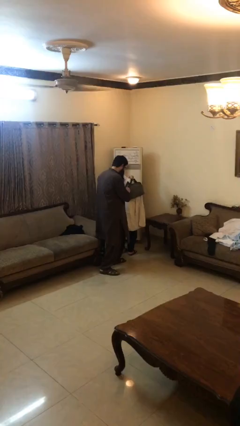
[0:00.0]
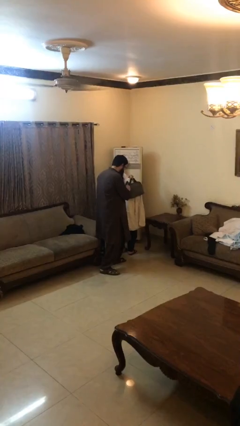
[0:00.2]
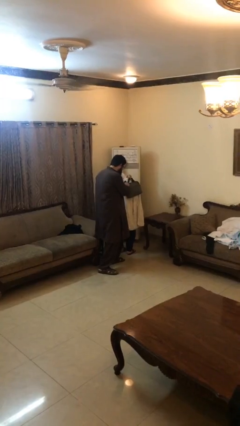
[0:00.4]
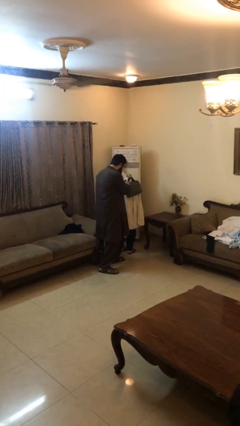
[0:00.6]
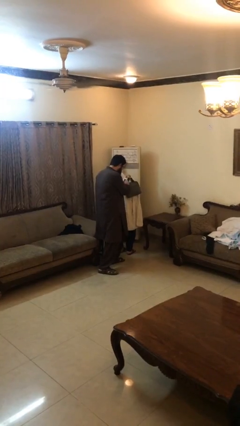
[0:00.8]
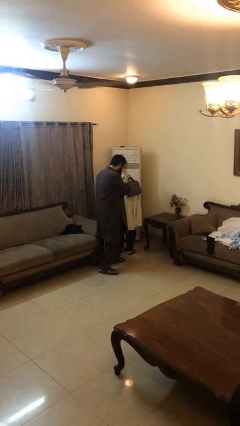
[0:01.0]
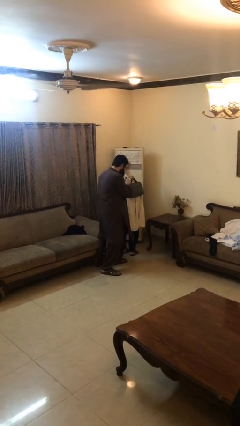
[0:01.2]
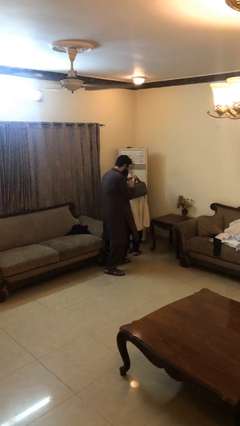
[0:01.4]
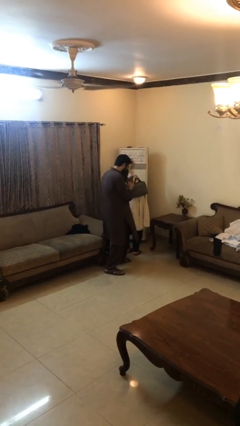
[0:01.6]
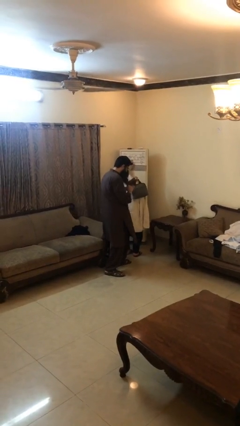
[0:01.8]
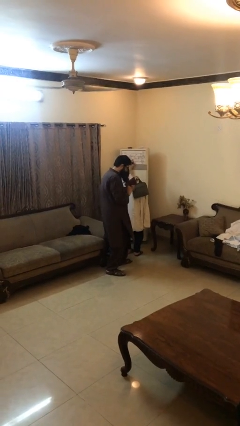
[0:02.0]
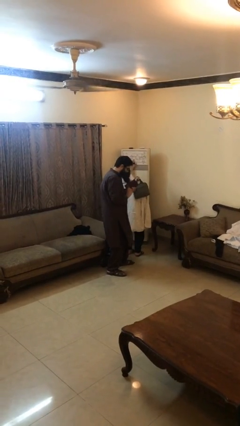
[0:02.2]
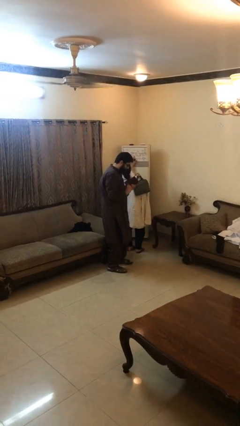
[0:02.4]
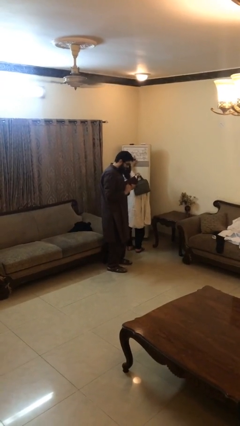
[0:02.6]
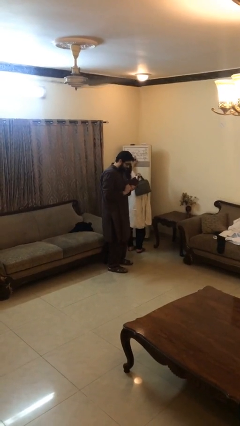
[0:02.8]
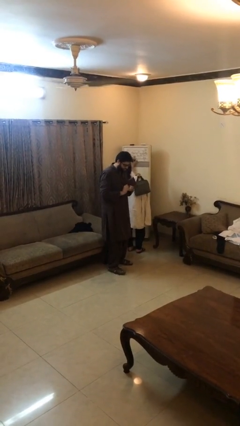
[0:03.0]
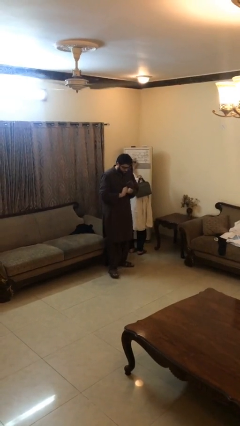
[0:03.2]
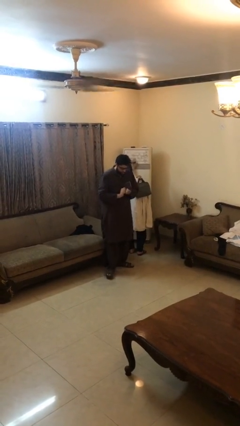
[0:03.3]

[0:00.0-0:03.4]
person steals object from person

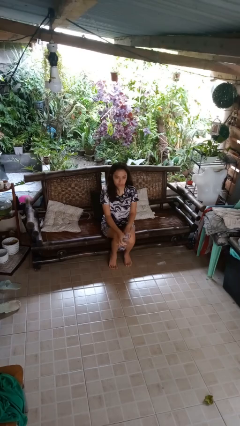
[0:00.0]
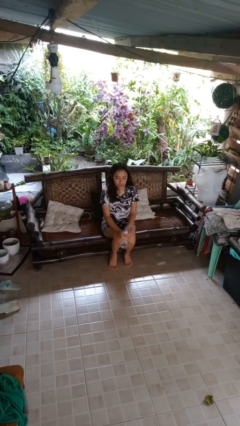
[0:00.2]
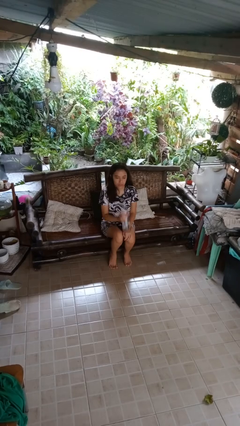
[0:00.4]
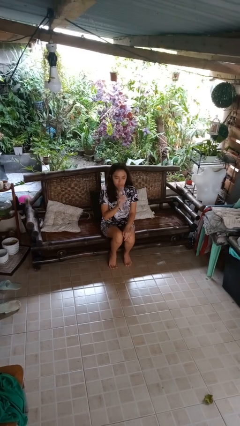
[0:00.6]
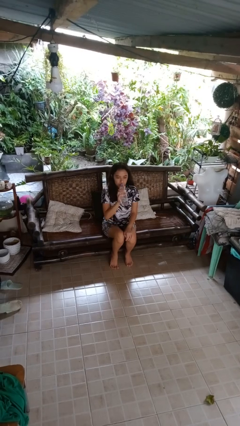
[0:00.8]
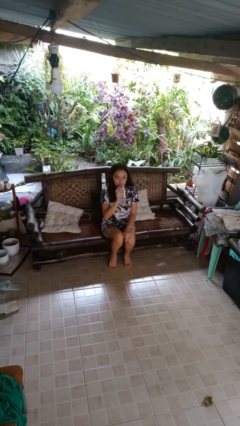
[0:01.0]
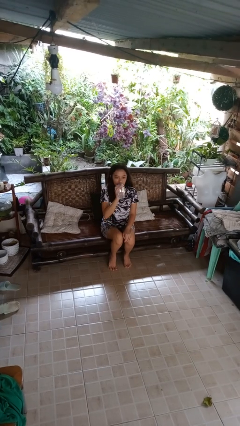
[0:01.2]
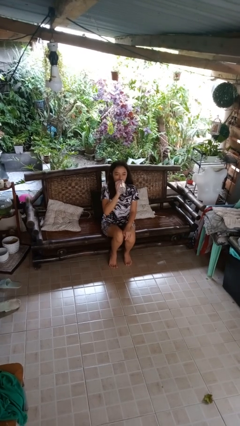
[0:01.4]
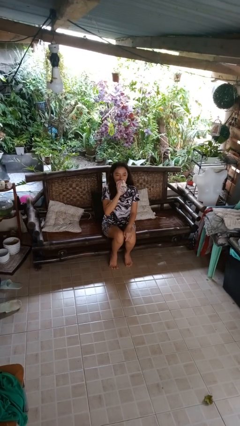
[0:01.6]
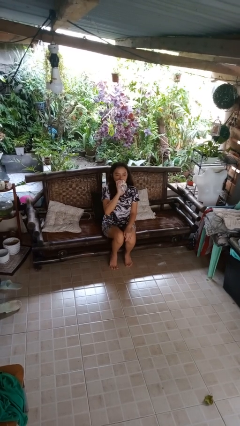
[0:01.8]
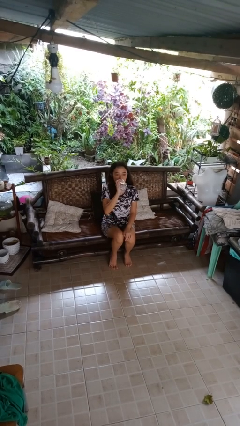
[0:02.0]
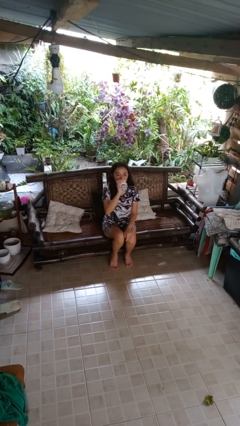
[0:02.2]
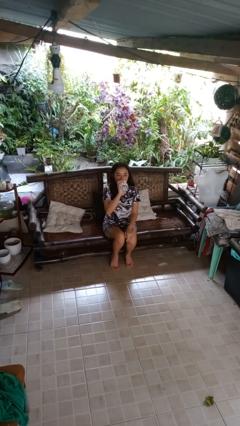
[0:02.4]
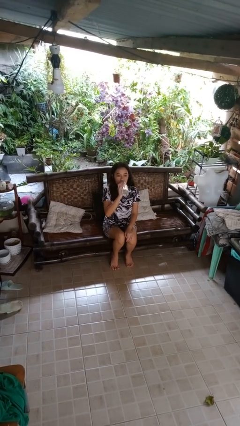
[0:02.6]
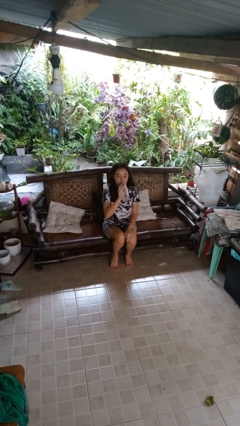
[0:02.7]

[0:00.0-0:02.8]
person drinks from bottle

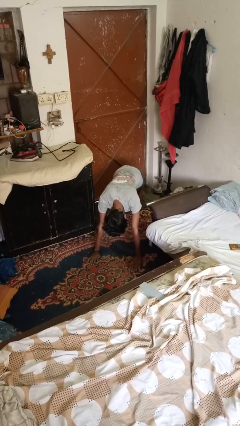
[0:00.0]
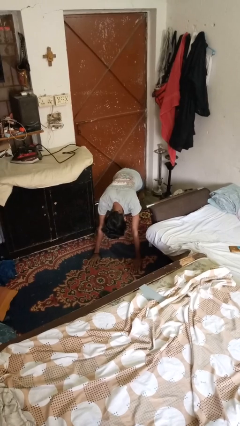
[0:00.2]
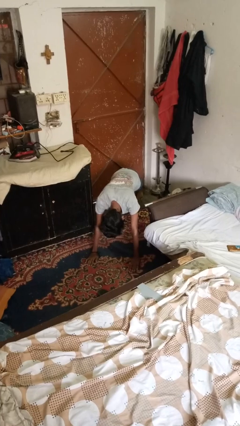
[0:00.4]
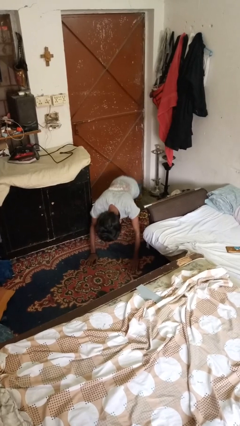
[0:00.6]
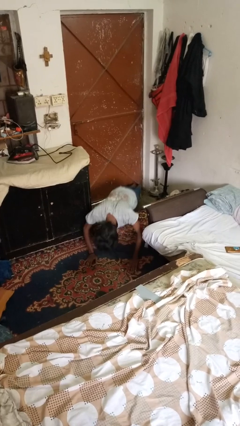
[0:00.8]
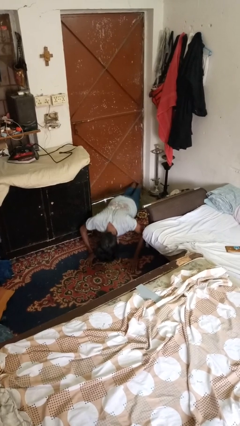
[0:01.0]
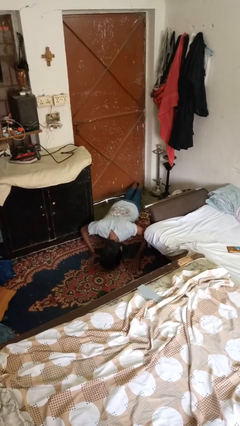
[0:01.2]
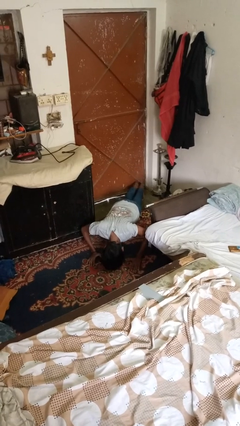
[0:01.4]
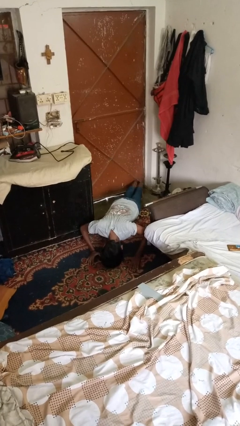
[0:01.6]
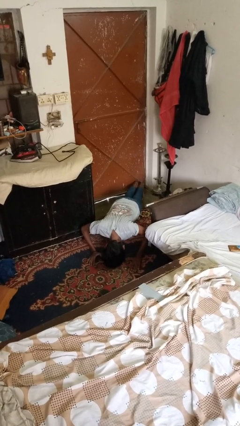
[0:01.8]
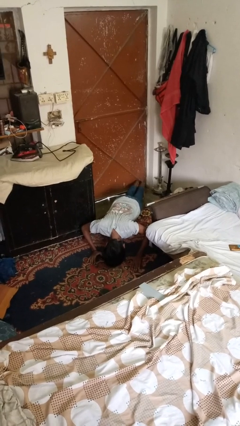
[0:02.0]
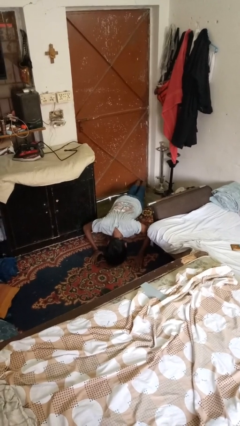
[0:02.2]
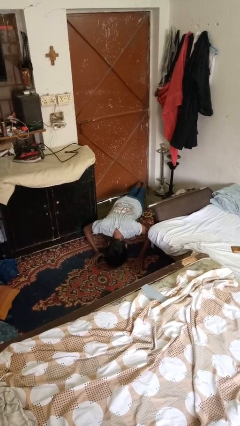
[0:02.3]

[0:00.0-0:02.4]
person exercises with pushup

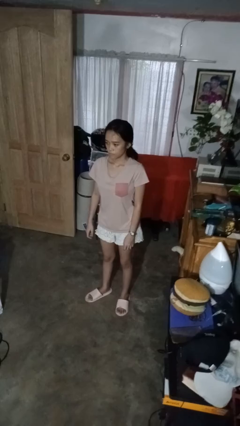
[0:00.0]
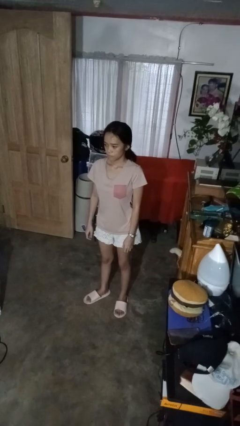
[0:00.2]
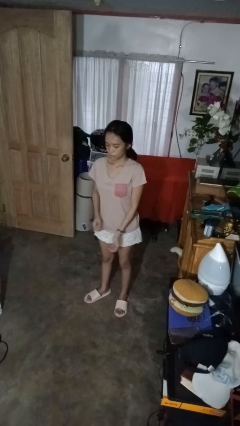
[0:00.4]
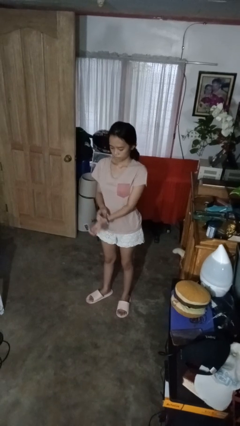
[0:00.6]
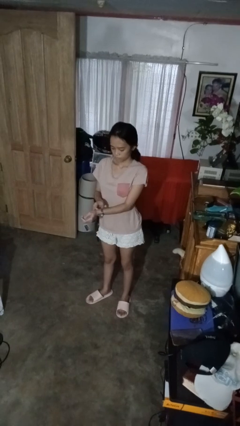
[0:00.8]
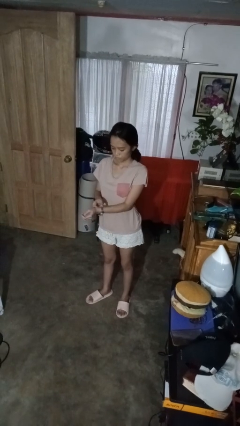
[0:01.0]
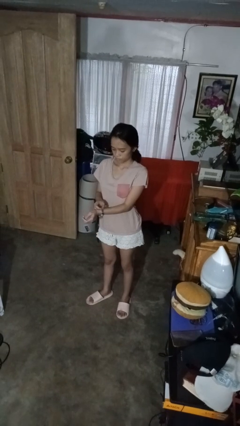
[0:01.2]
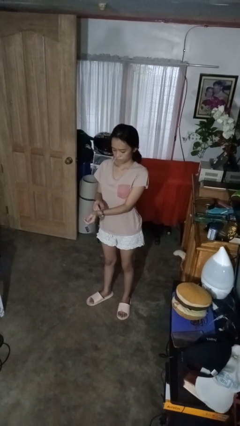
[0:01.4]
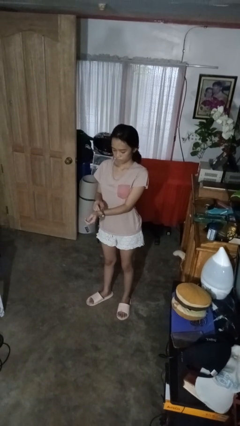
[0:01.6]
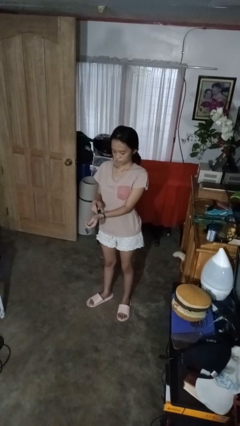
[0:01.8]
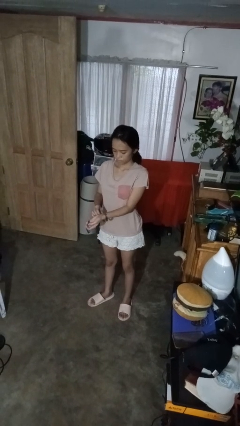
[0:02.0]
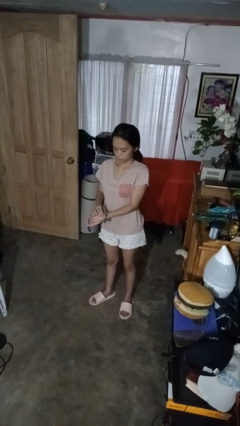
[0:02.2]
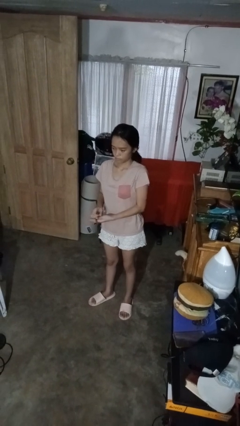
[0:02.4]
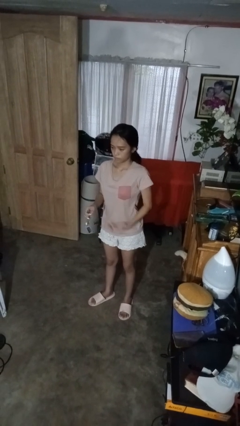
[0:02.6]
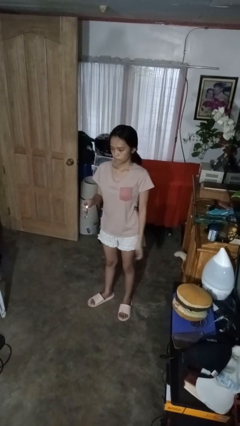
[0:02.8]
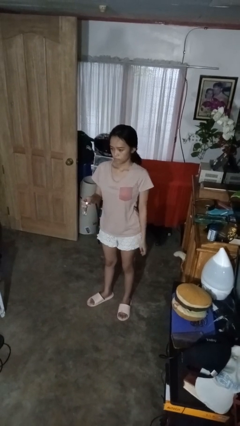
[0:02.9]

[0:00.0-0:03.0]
person takes off wristwatch

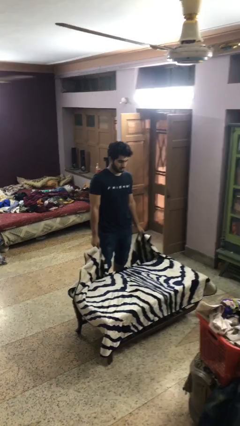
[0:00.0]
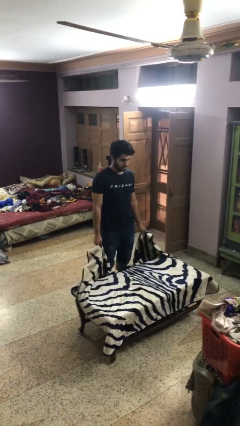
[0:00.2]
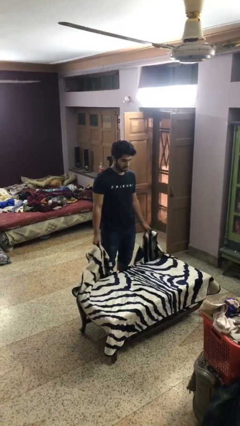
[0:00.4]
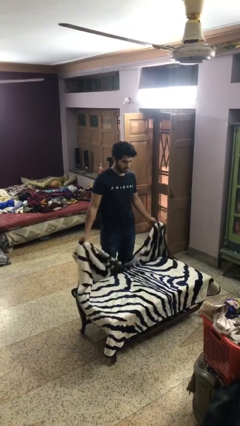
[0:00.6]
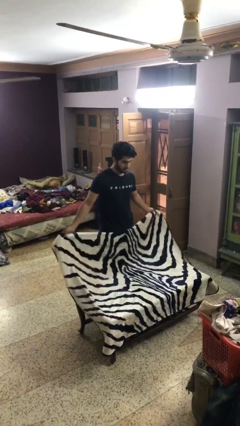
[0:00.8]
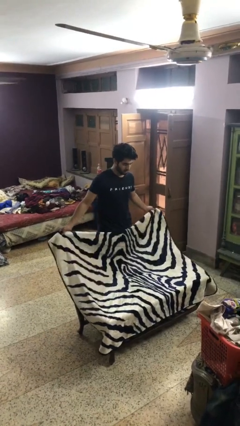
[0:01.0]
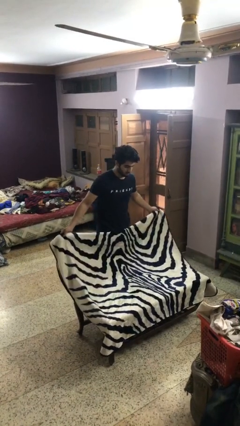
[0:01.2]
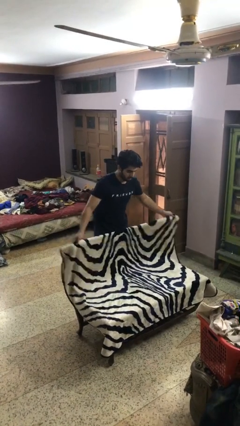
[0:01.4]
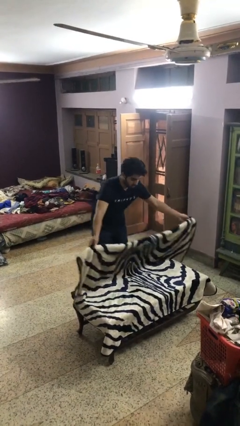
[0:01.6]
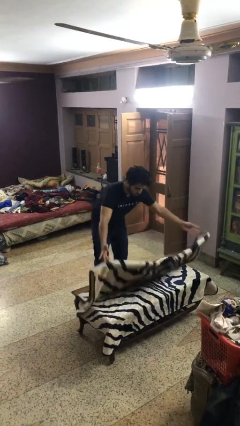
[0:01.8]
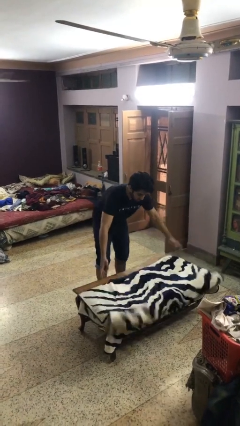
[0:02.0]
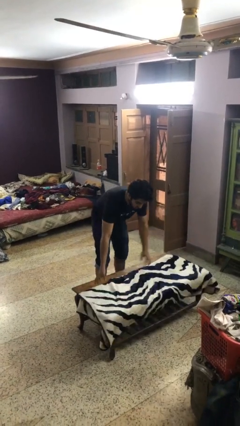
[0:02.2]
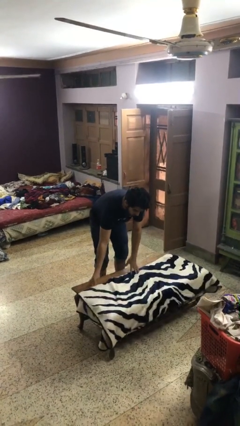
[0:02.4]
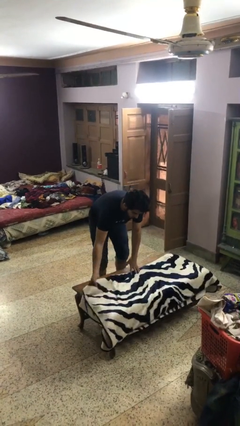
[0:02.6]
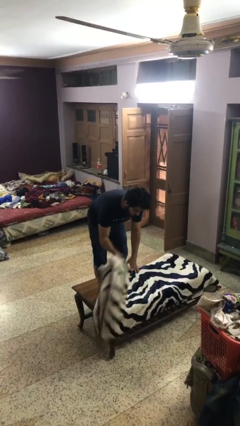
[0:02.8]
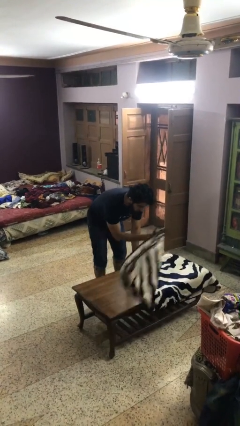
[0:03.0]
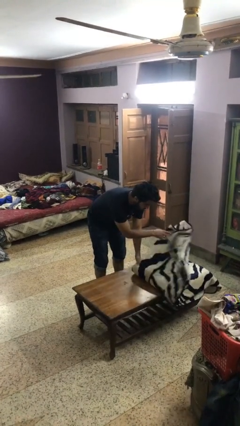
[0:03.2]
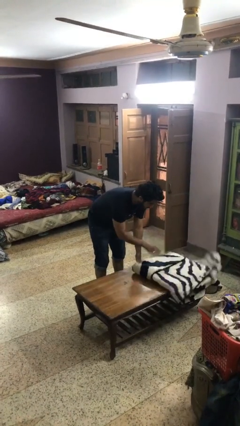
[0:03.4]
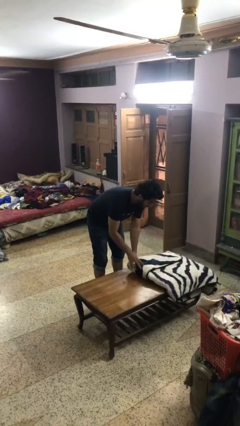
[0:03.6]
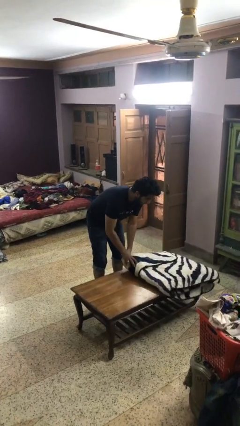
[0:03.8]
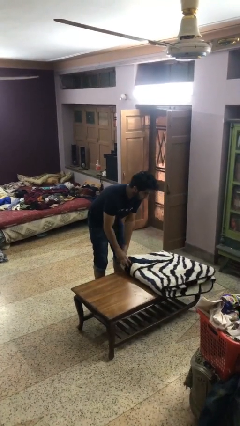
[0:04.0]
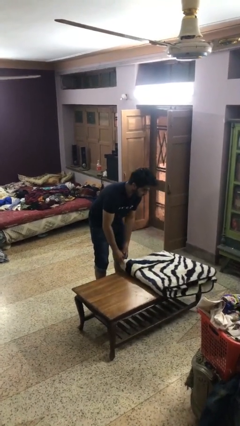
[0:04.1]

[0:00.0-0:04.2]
person folds blanket

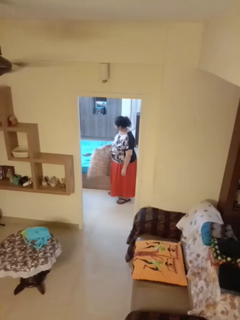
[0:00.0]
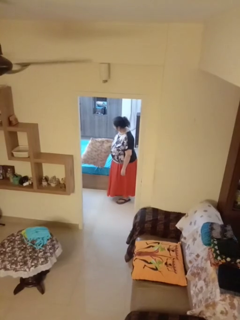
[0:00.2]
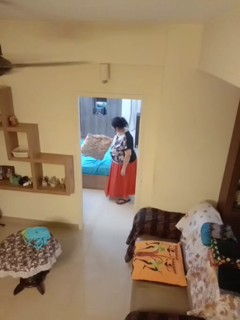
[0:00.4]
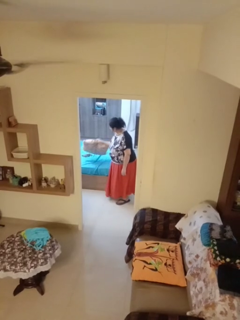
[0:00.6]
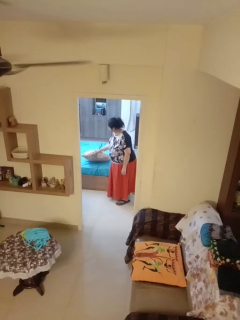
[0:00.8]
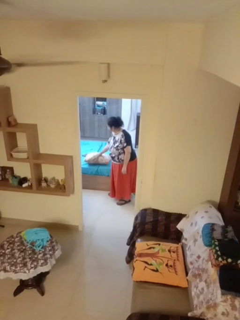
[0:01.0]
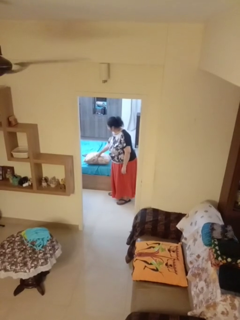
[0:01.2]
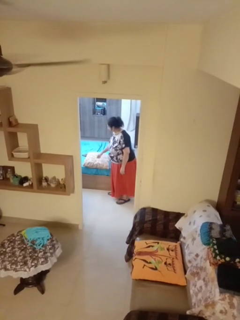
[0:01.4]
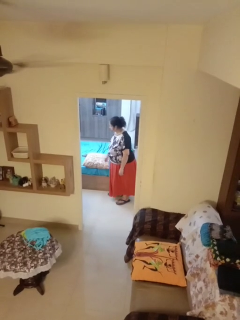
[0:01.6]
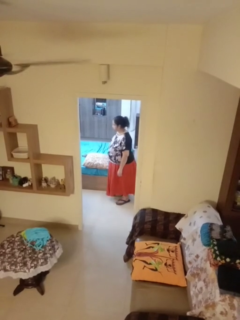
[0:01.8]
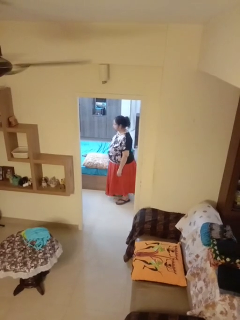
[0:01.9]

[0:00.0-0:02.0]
person puts down object on bed
